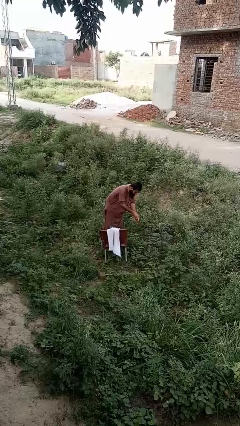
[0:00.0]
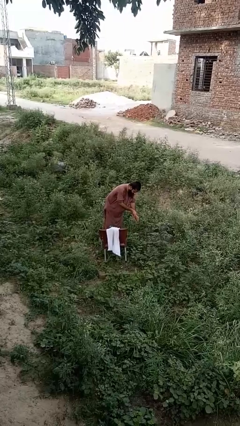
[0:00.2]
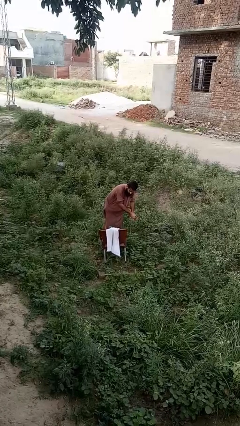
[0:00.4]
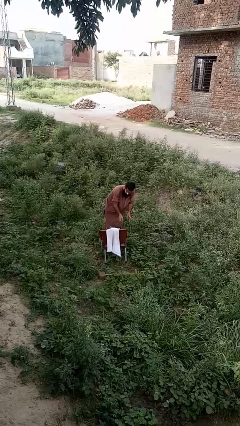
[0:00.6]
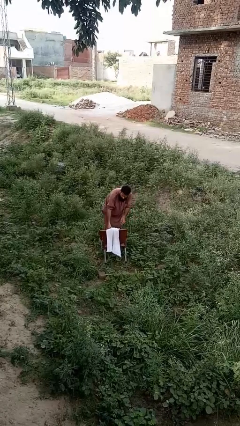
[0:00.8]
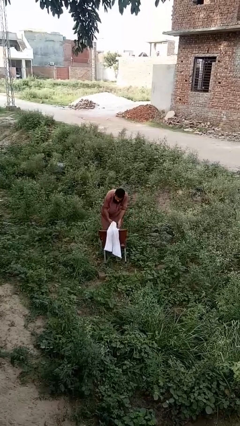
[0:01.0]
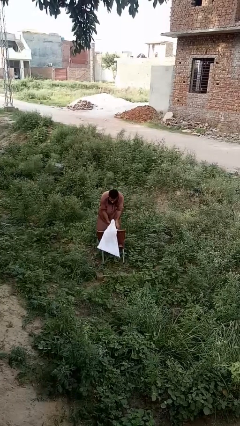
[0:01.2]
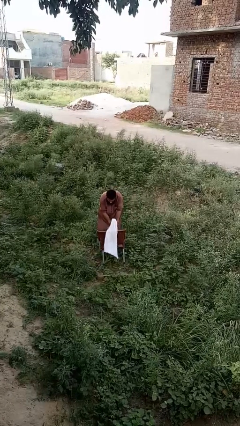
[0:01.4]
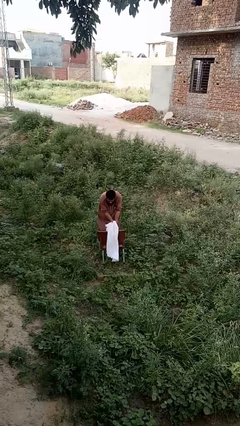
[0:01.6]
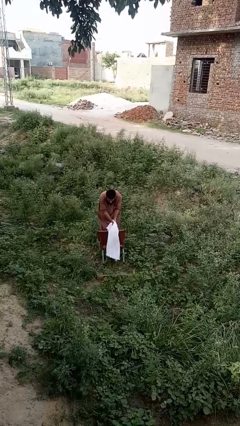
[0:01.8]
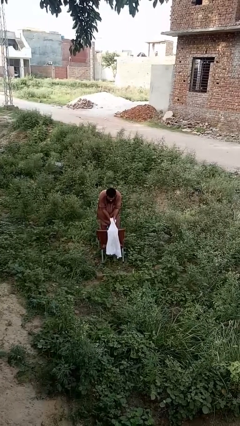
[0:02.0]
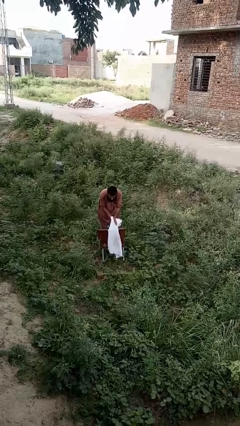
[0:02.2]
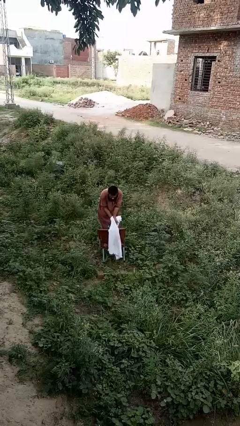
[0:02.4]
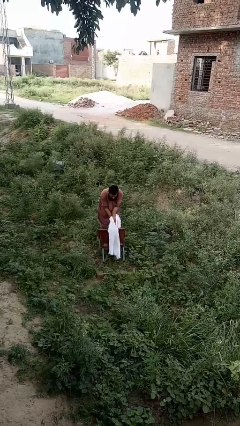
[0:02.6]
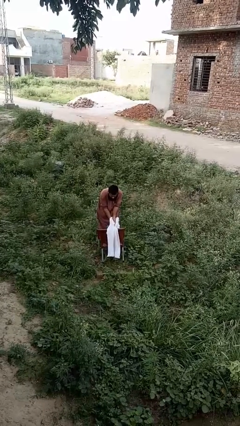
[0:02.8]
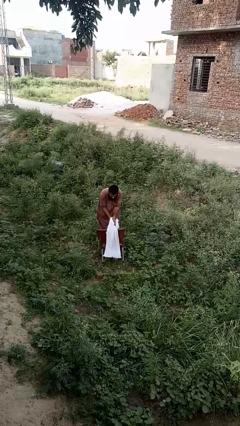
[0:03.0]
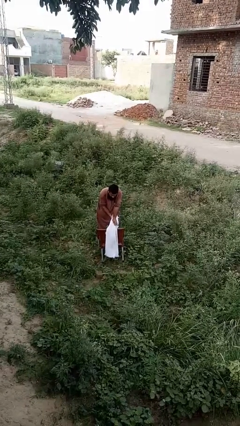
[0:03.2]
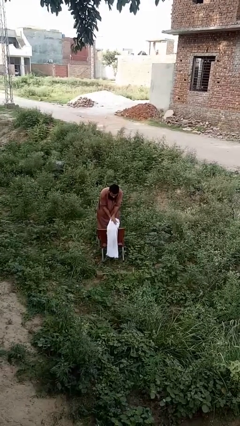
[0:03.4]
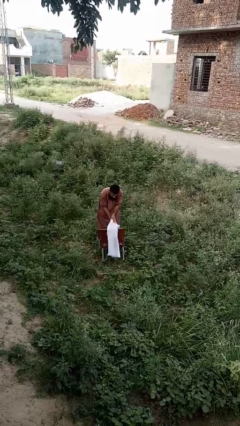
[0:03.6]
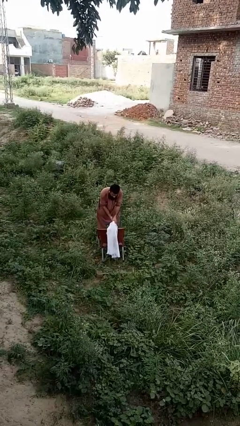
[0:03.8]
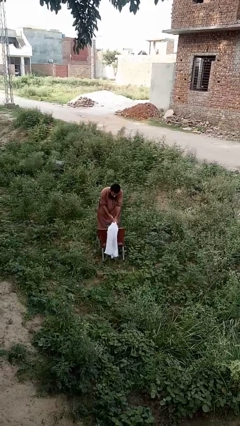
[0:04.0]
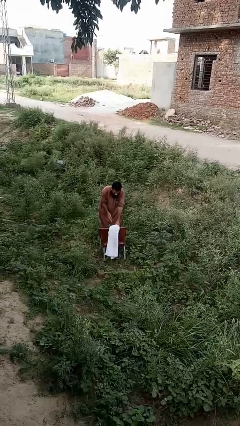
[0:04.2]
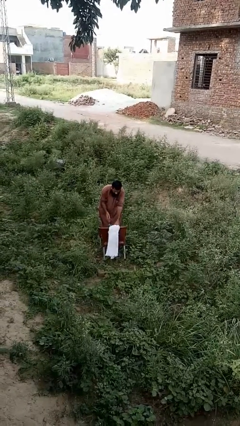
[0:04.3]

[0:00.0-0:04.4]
person dries hands with towel

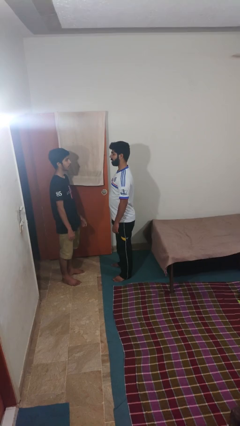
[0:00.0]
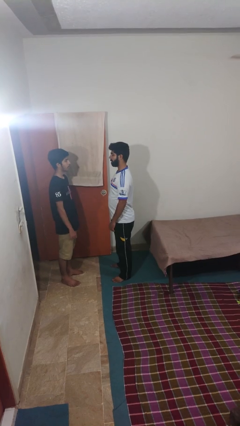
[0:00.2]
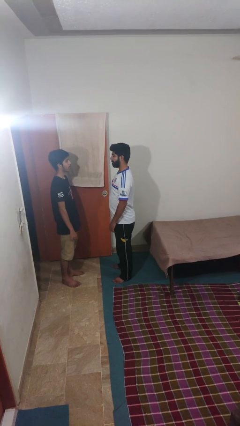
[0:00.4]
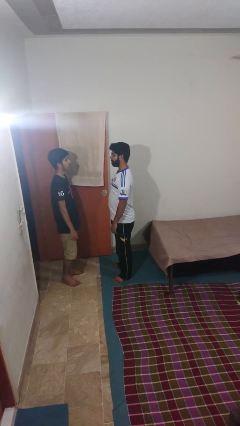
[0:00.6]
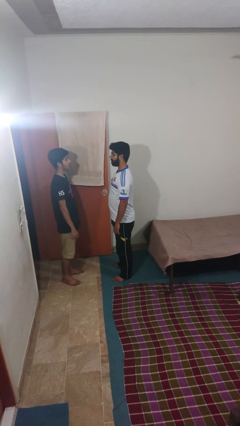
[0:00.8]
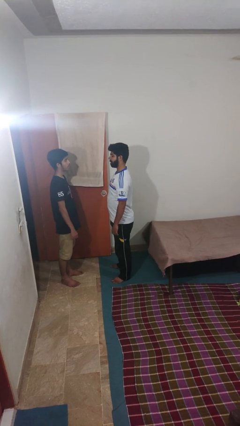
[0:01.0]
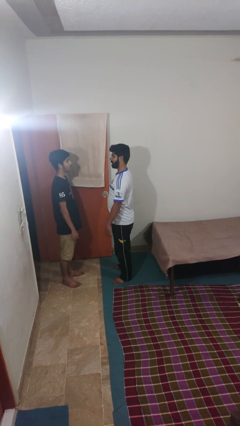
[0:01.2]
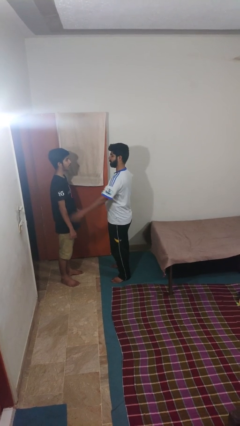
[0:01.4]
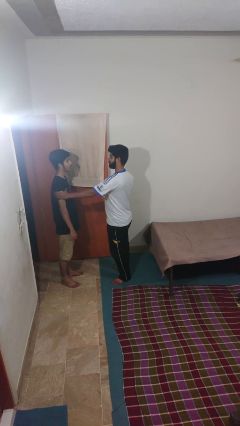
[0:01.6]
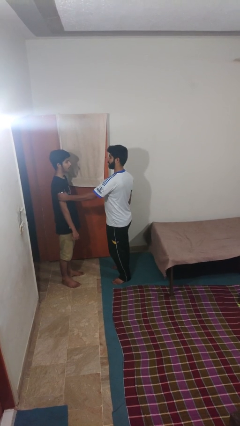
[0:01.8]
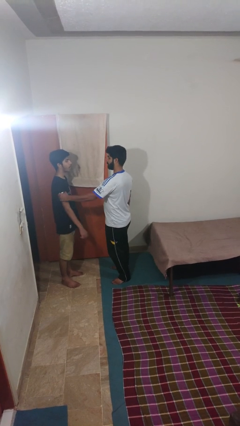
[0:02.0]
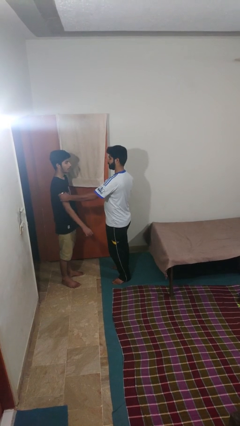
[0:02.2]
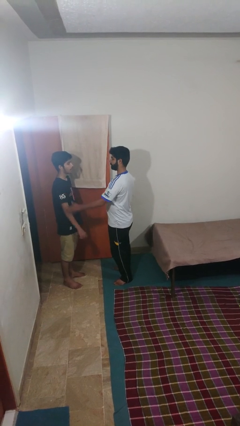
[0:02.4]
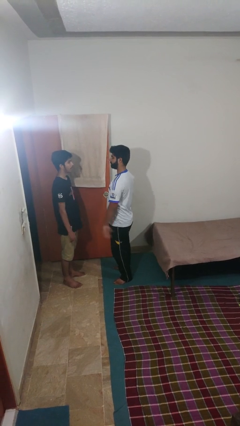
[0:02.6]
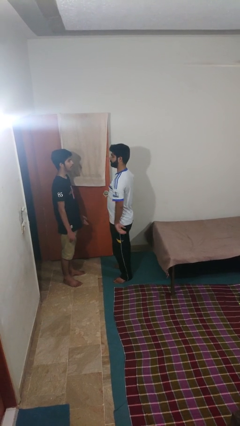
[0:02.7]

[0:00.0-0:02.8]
person grabs person by bicep

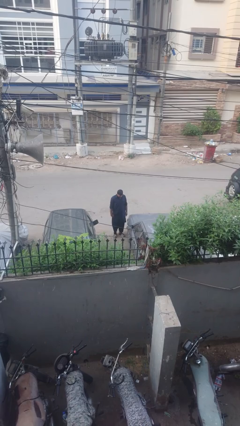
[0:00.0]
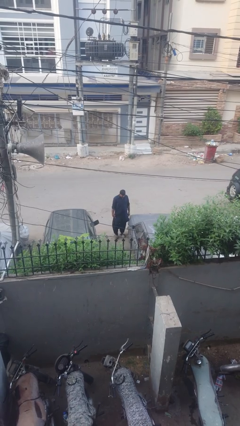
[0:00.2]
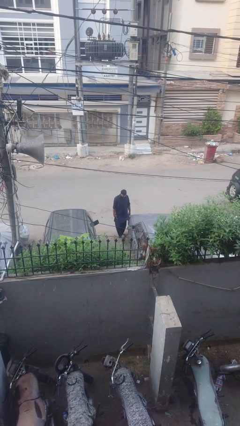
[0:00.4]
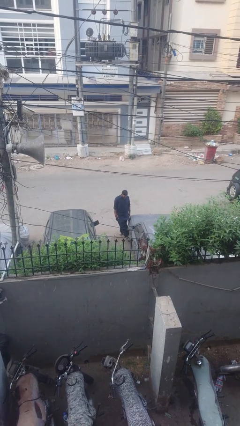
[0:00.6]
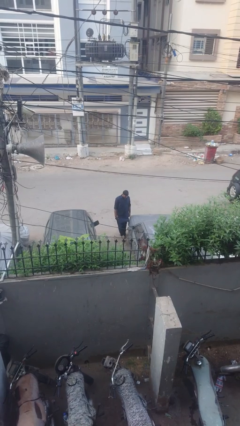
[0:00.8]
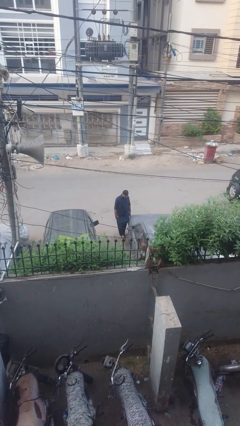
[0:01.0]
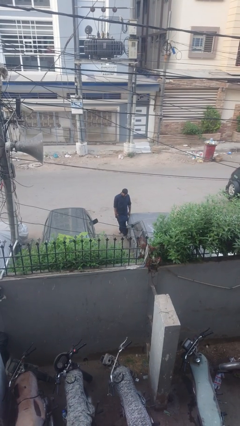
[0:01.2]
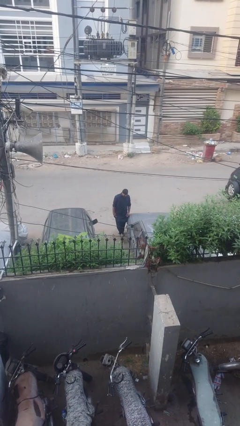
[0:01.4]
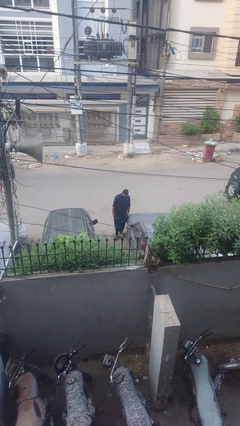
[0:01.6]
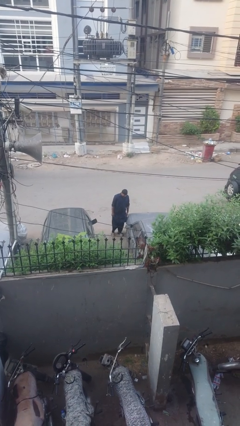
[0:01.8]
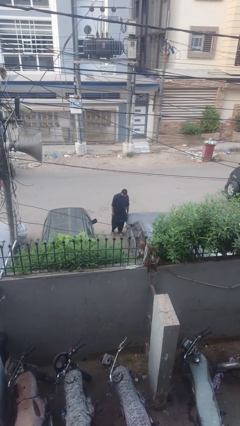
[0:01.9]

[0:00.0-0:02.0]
person kicks car tires

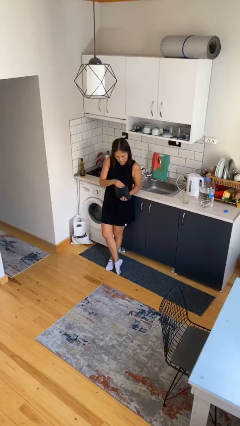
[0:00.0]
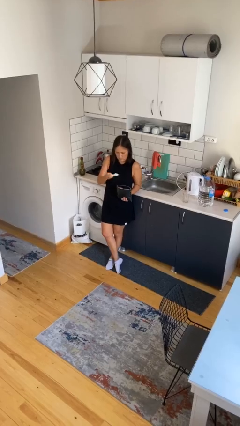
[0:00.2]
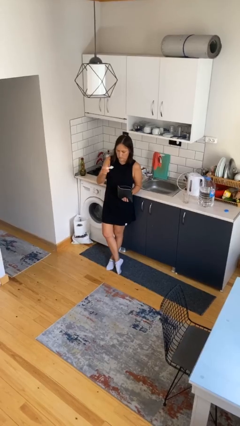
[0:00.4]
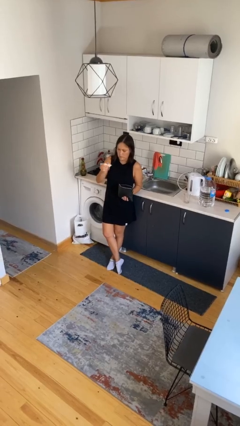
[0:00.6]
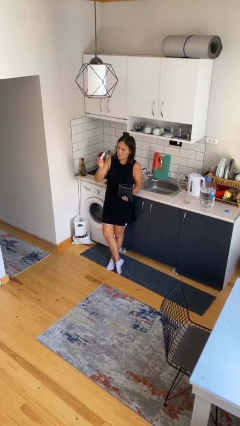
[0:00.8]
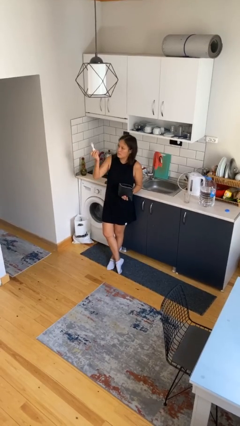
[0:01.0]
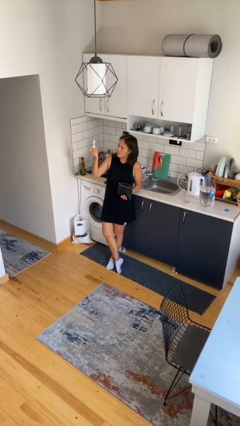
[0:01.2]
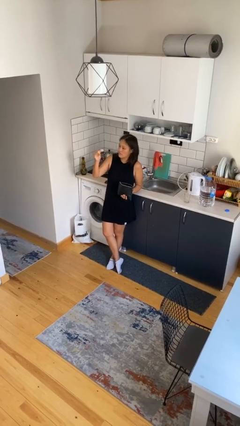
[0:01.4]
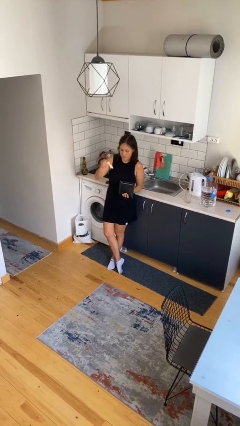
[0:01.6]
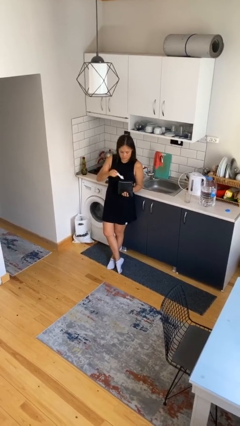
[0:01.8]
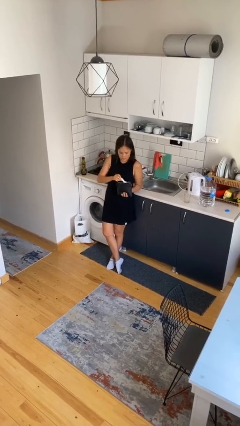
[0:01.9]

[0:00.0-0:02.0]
person takes object from purse

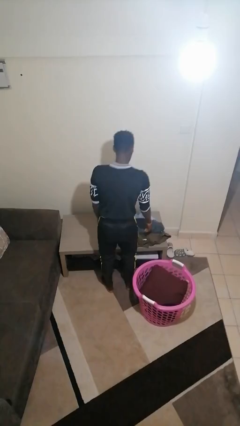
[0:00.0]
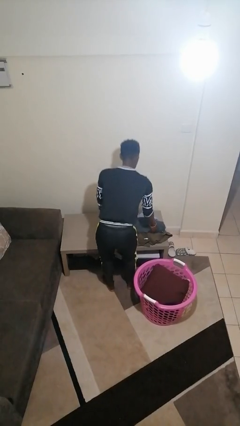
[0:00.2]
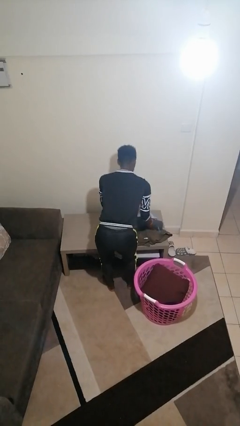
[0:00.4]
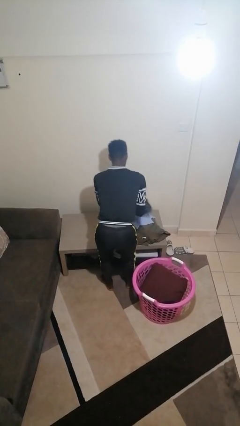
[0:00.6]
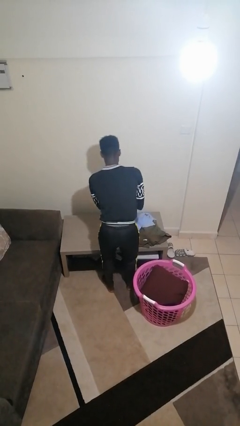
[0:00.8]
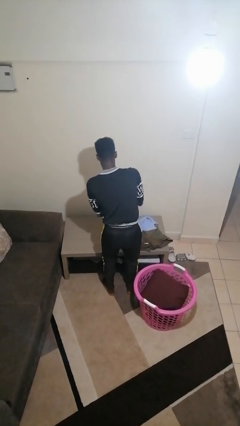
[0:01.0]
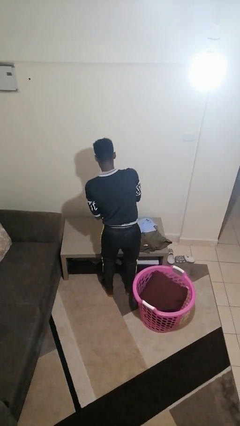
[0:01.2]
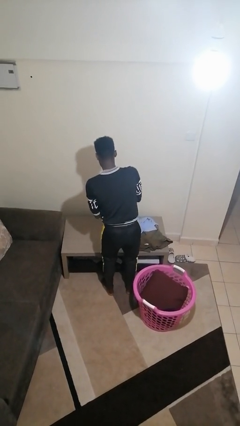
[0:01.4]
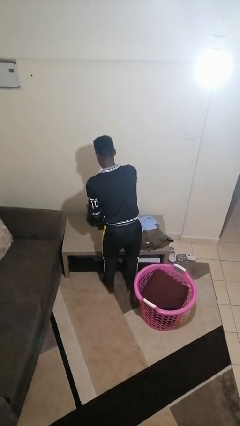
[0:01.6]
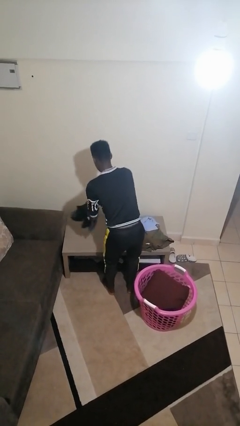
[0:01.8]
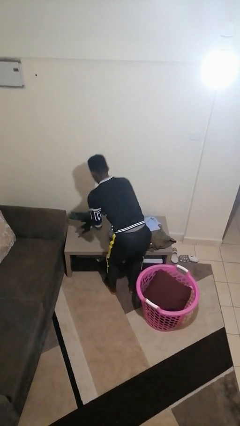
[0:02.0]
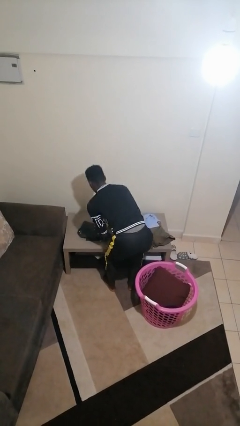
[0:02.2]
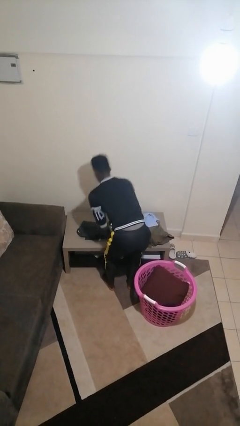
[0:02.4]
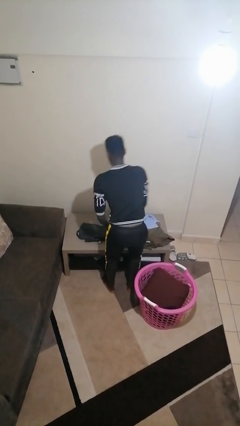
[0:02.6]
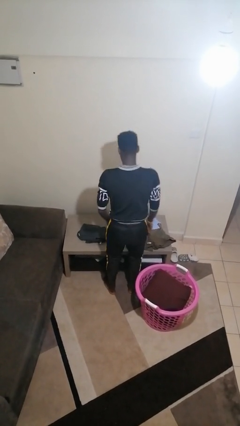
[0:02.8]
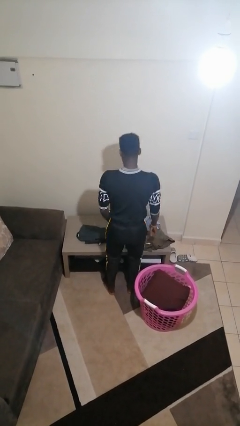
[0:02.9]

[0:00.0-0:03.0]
person folds pants

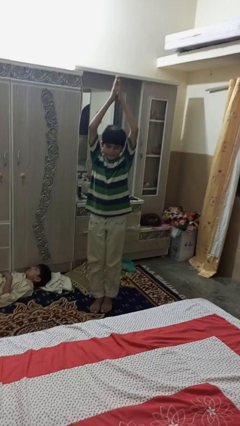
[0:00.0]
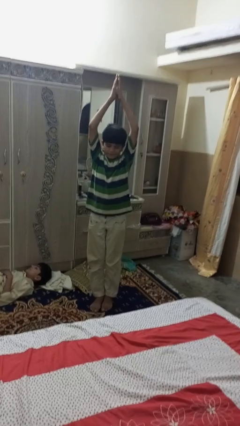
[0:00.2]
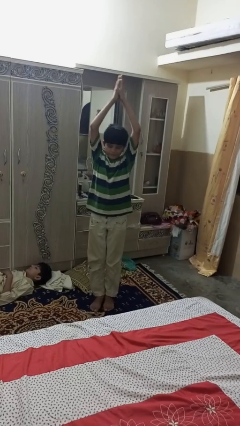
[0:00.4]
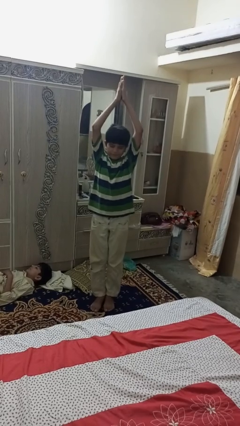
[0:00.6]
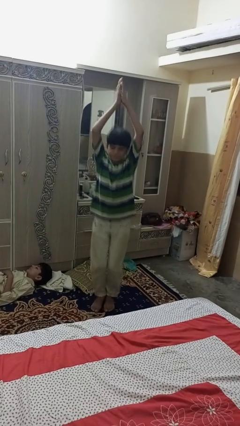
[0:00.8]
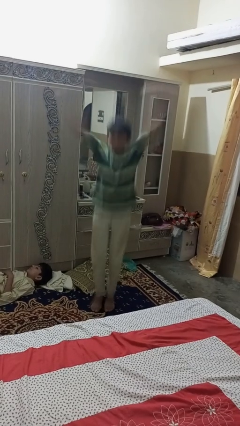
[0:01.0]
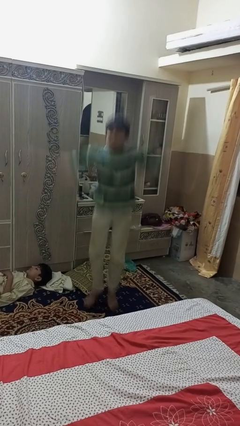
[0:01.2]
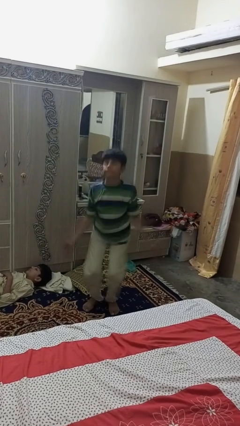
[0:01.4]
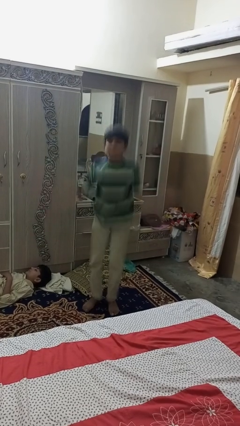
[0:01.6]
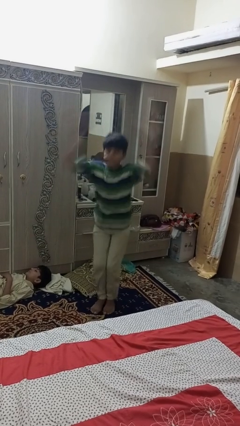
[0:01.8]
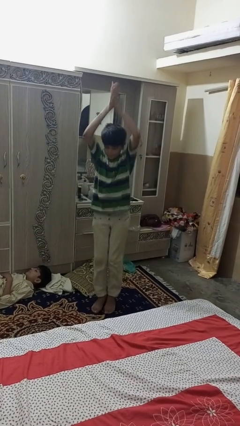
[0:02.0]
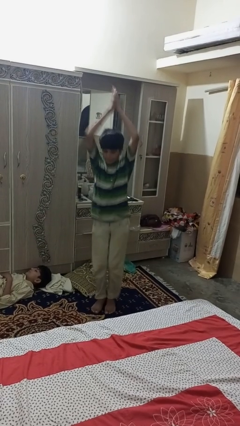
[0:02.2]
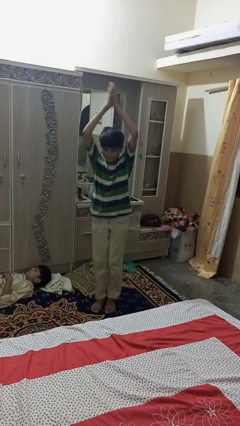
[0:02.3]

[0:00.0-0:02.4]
person exercises with jumping jacks

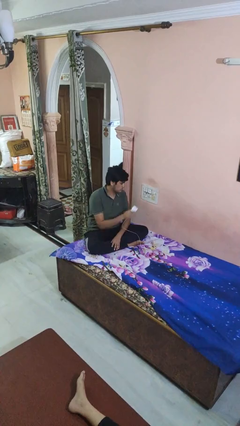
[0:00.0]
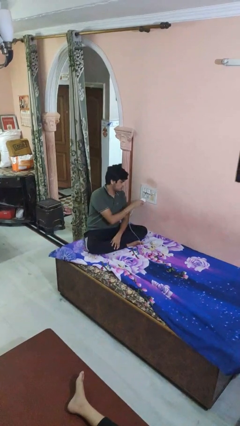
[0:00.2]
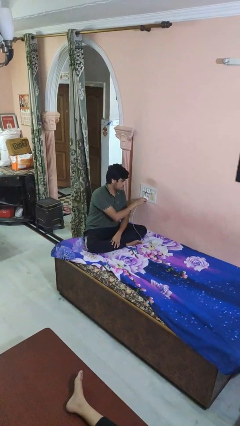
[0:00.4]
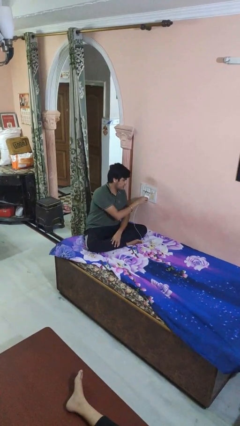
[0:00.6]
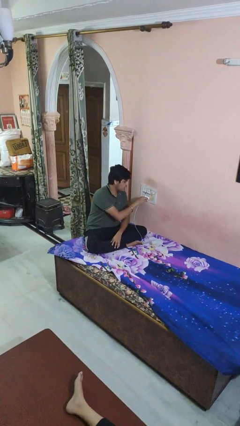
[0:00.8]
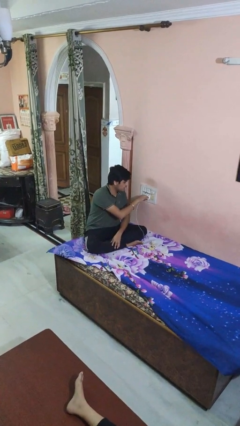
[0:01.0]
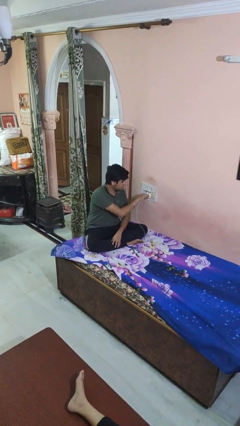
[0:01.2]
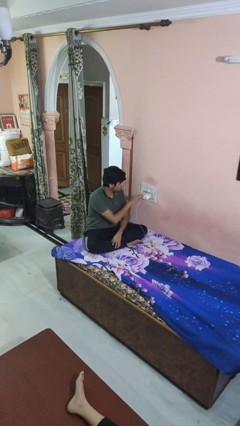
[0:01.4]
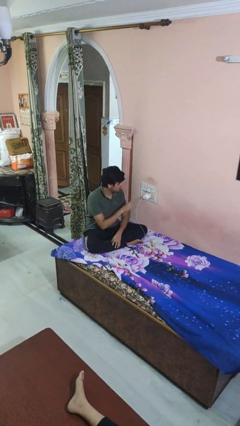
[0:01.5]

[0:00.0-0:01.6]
person plugs into electrical socket
